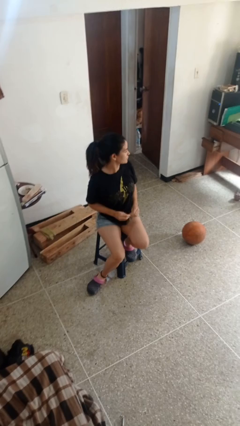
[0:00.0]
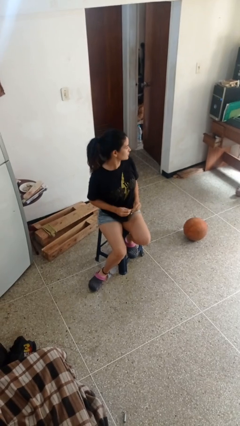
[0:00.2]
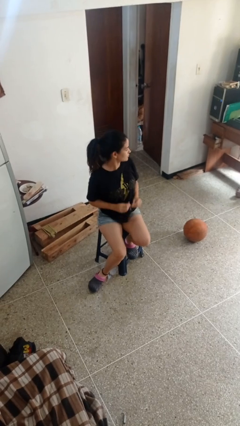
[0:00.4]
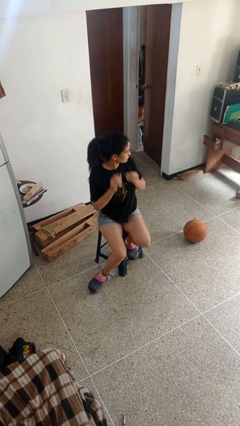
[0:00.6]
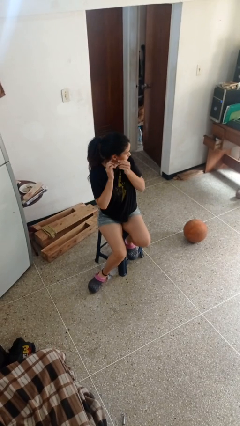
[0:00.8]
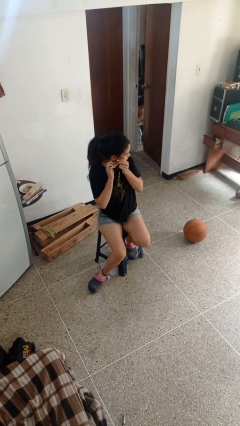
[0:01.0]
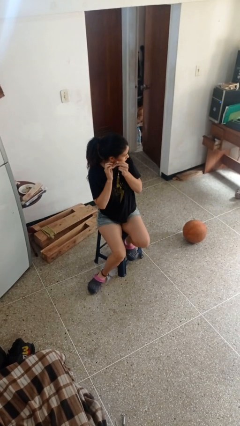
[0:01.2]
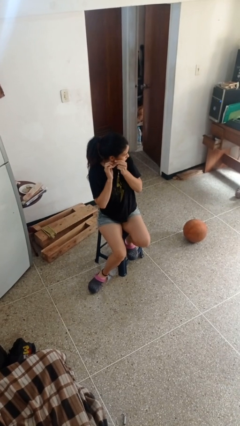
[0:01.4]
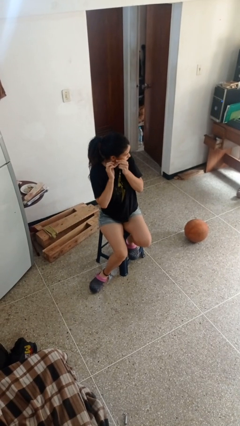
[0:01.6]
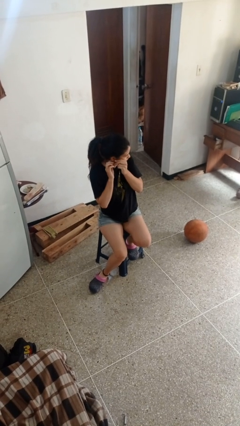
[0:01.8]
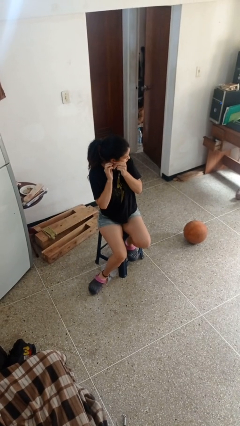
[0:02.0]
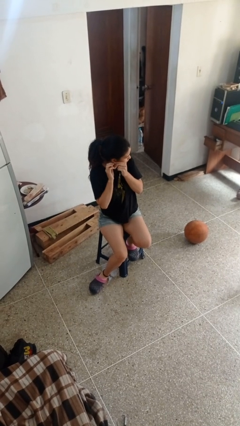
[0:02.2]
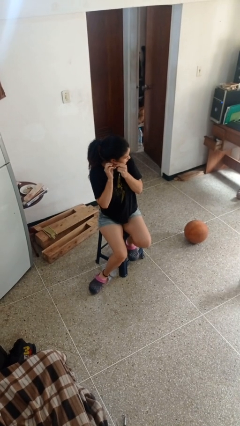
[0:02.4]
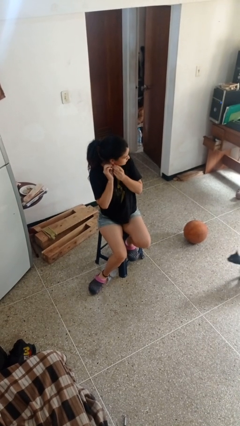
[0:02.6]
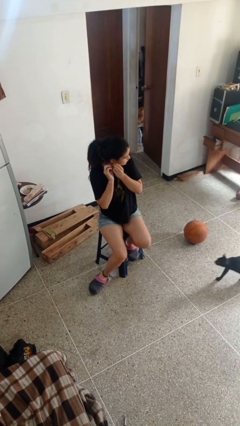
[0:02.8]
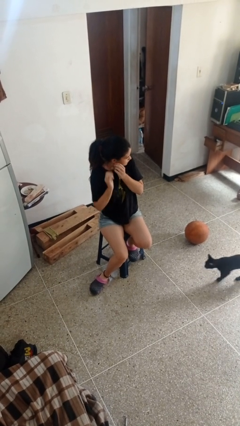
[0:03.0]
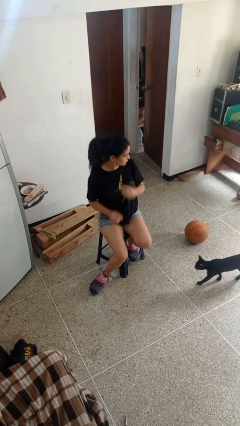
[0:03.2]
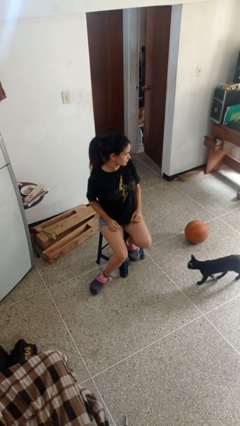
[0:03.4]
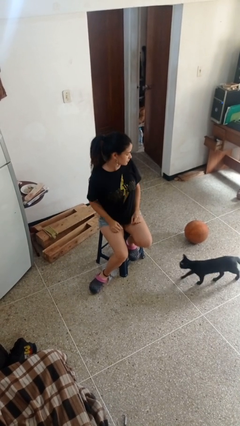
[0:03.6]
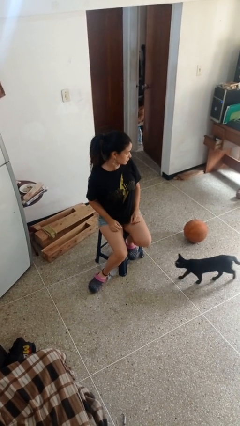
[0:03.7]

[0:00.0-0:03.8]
person puts on earrings

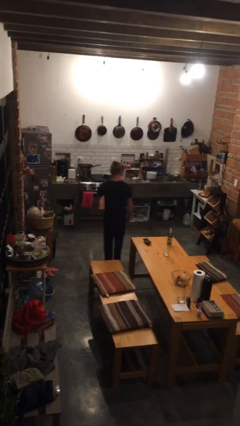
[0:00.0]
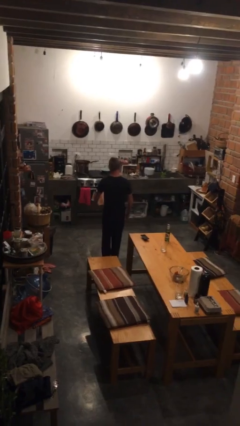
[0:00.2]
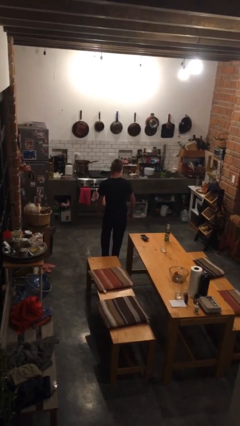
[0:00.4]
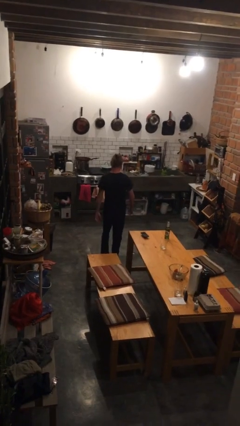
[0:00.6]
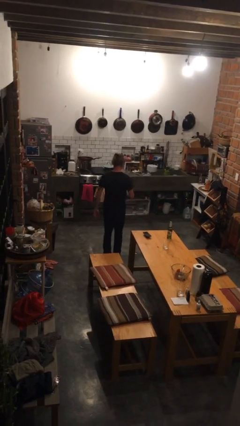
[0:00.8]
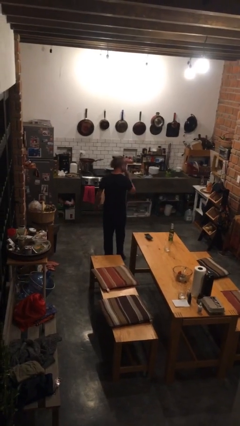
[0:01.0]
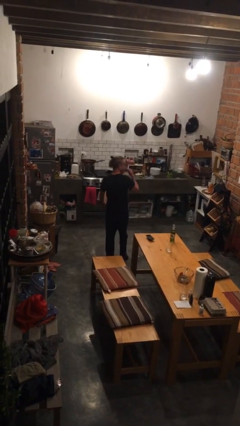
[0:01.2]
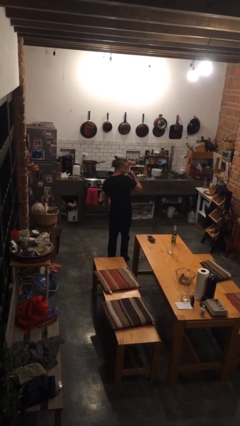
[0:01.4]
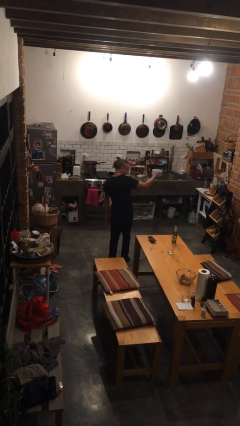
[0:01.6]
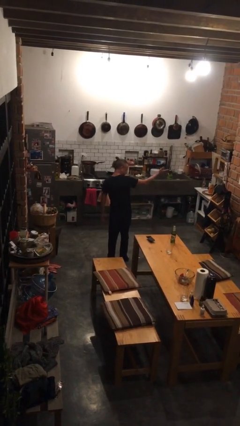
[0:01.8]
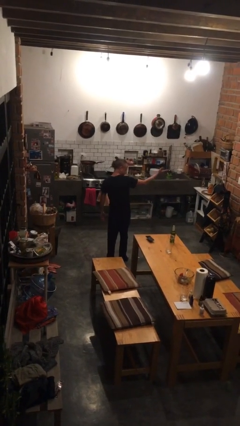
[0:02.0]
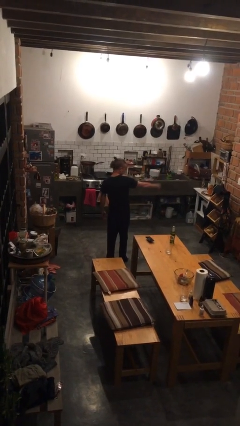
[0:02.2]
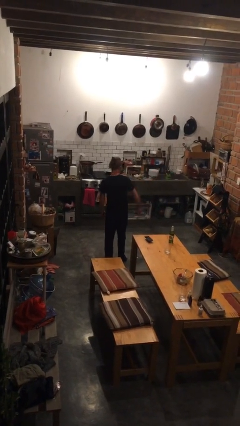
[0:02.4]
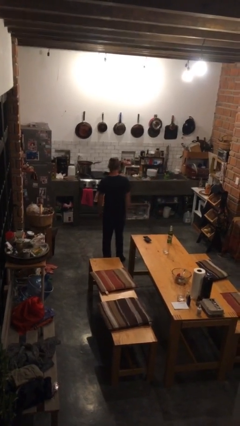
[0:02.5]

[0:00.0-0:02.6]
person gestures blow kiss

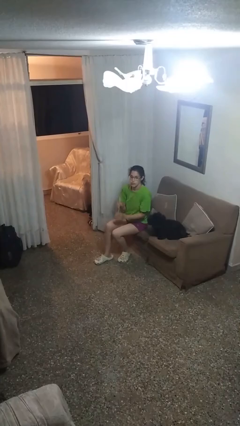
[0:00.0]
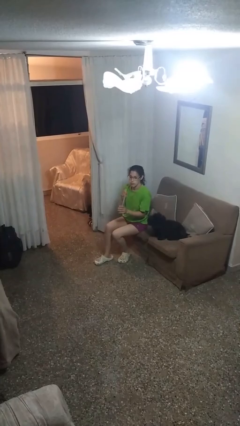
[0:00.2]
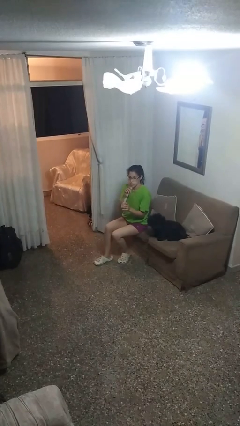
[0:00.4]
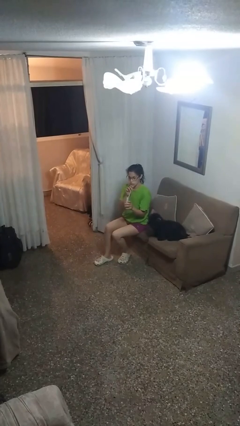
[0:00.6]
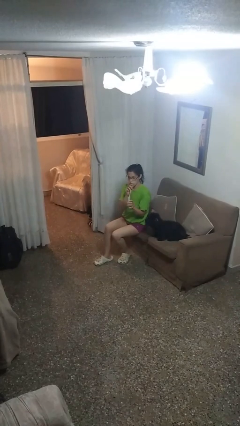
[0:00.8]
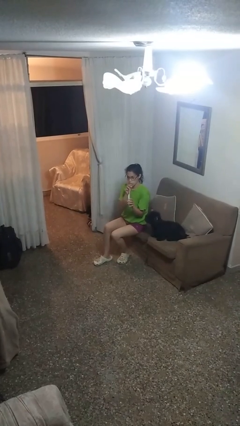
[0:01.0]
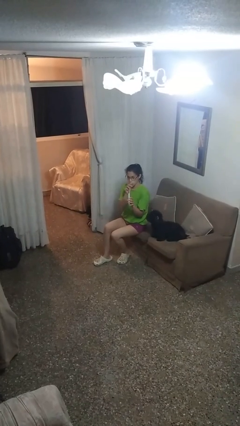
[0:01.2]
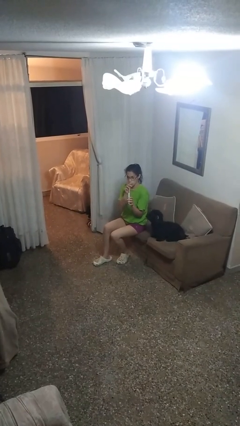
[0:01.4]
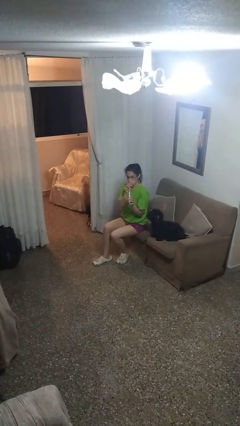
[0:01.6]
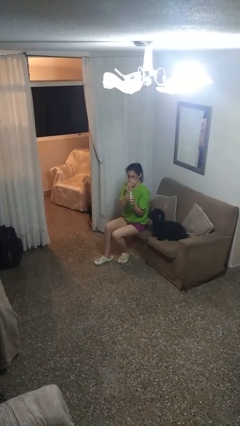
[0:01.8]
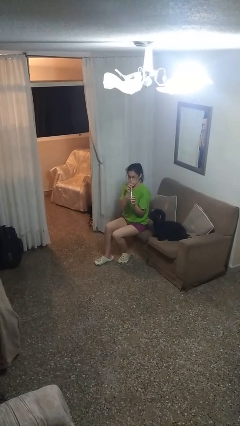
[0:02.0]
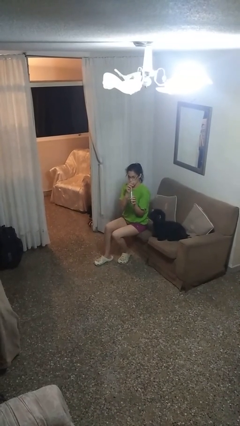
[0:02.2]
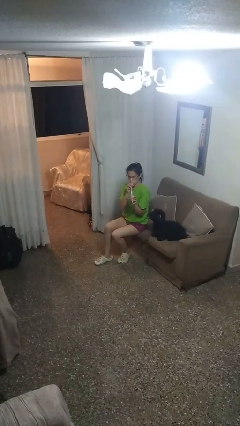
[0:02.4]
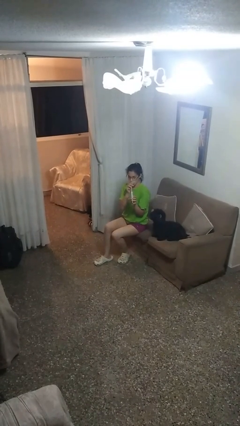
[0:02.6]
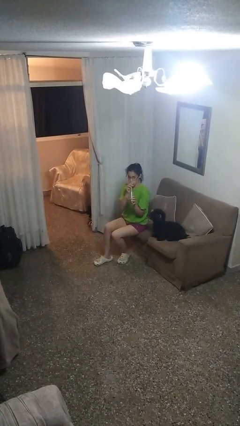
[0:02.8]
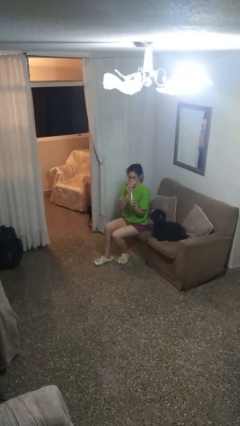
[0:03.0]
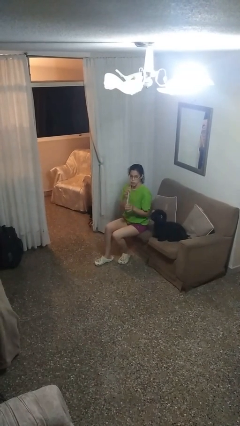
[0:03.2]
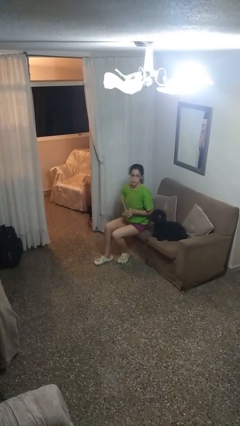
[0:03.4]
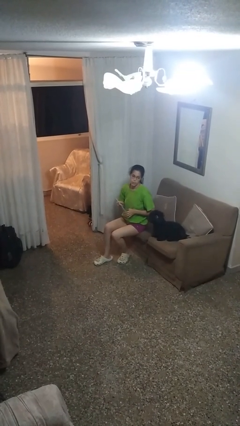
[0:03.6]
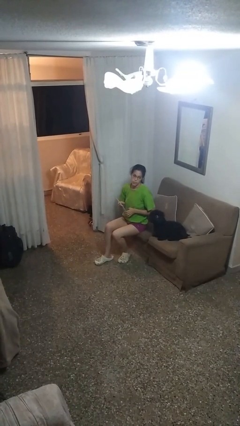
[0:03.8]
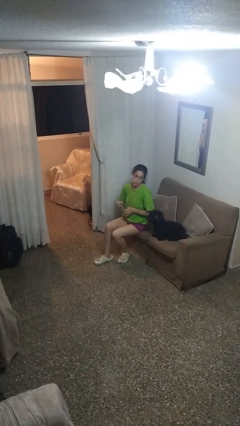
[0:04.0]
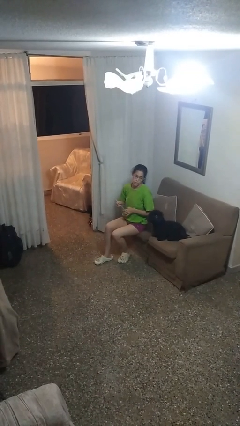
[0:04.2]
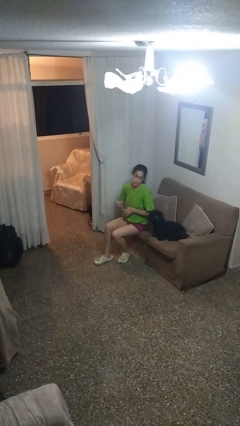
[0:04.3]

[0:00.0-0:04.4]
person drinks from straw

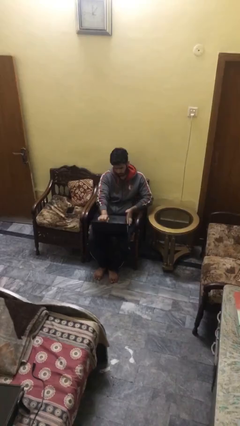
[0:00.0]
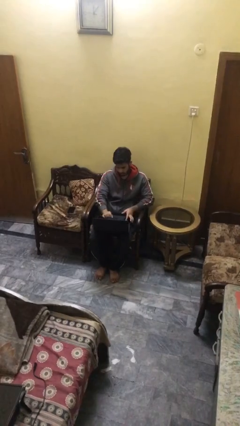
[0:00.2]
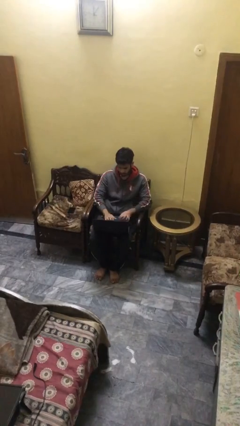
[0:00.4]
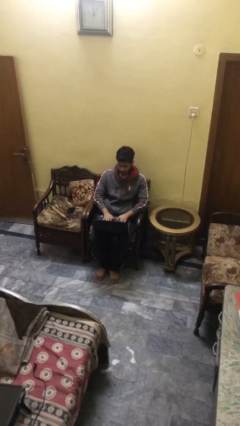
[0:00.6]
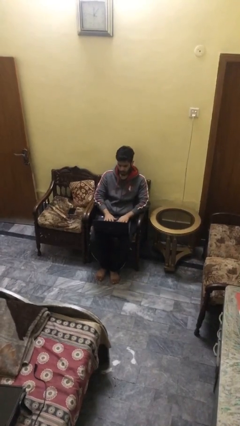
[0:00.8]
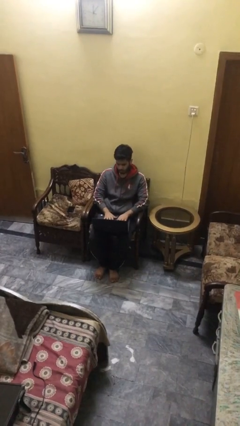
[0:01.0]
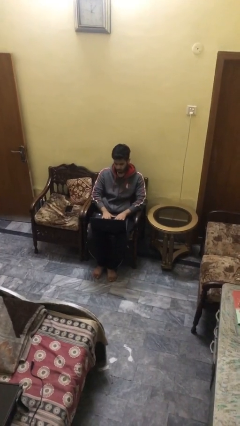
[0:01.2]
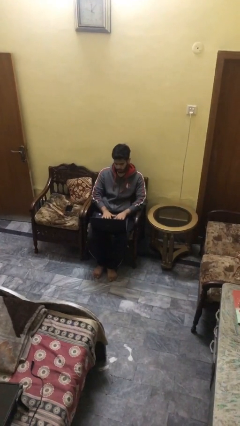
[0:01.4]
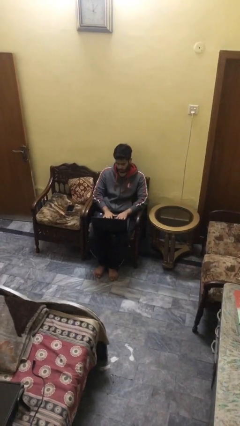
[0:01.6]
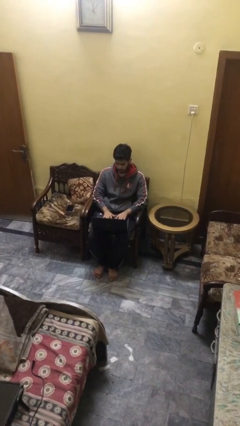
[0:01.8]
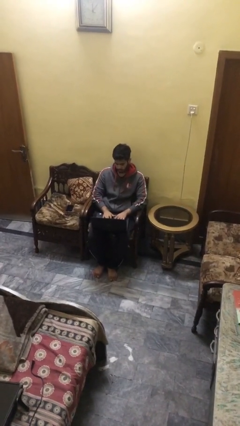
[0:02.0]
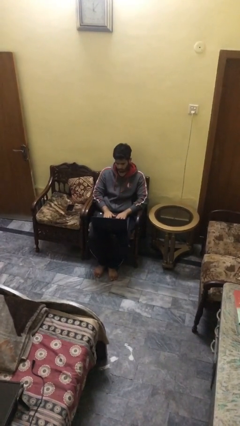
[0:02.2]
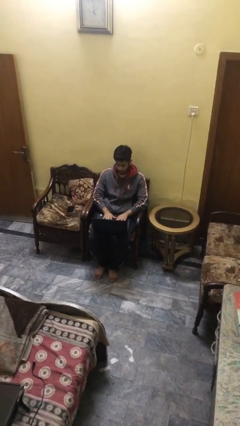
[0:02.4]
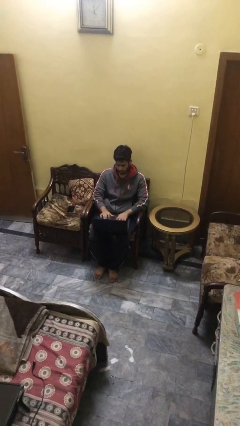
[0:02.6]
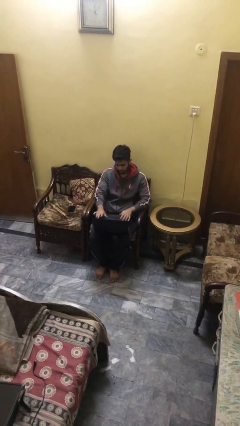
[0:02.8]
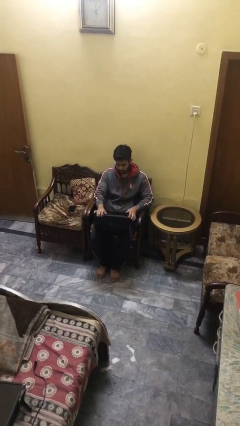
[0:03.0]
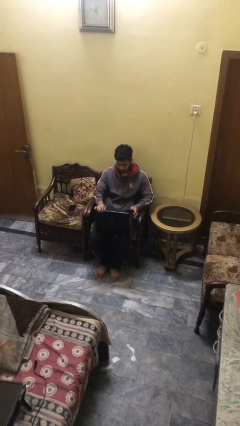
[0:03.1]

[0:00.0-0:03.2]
person interacts with laptop

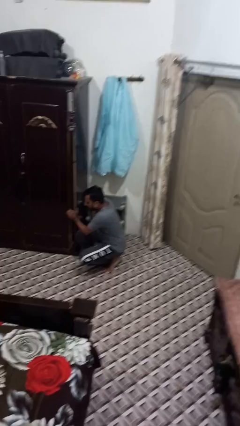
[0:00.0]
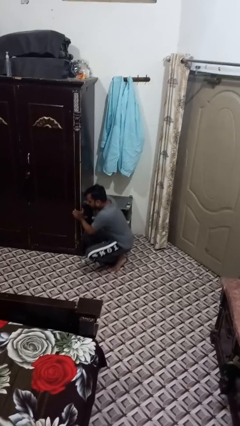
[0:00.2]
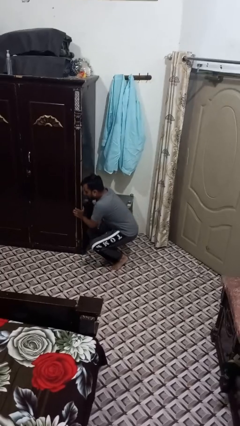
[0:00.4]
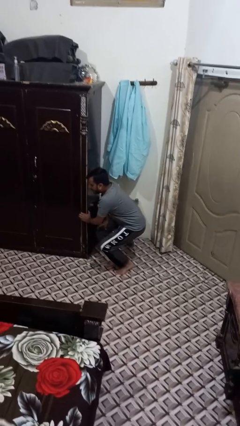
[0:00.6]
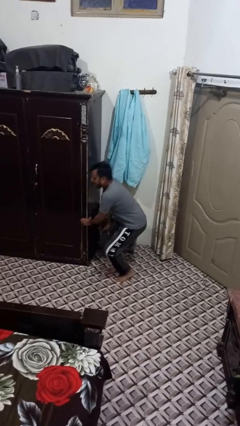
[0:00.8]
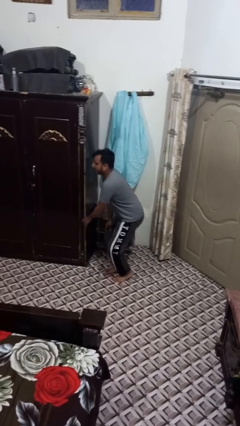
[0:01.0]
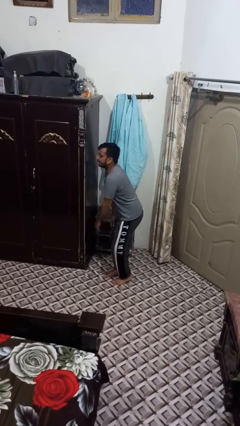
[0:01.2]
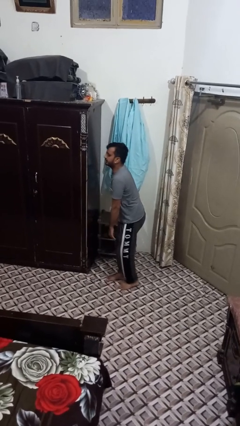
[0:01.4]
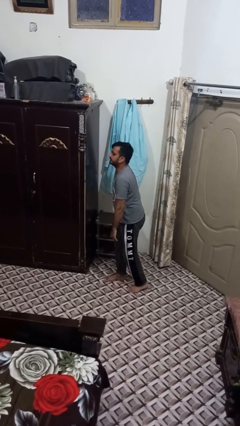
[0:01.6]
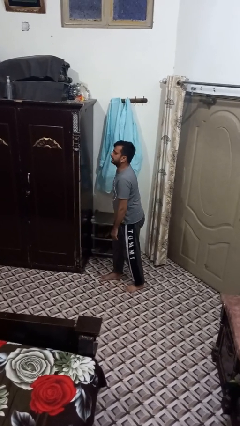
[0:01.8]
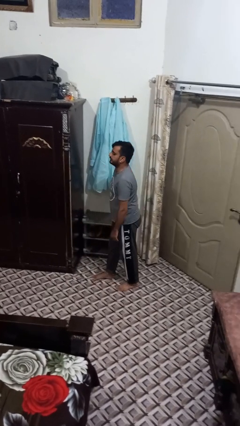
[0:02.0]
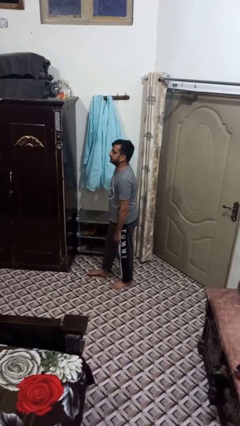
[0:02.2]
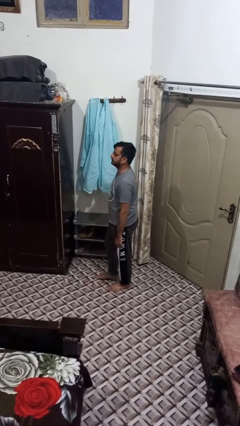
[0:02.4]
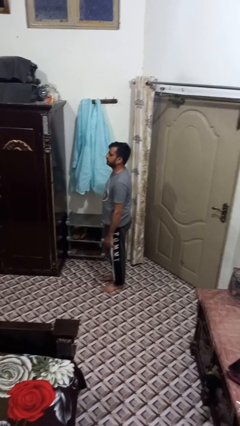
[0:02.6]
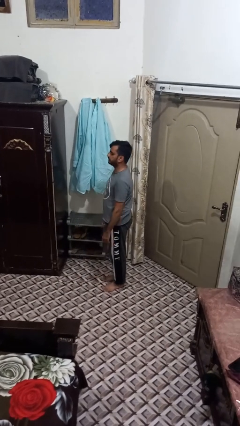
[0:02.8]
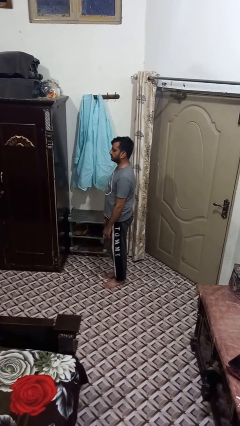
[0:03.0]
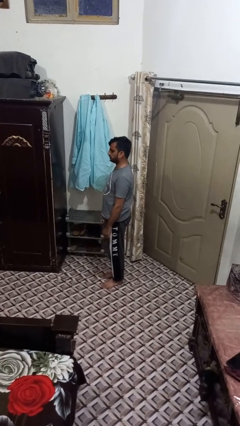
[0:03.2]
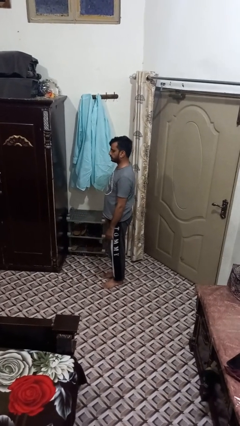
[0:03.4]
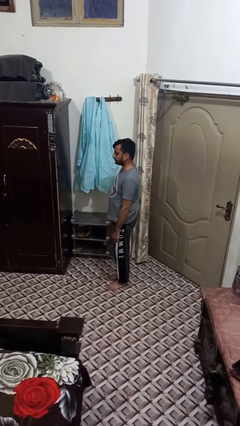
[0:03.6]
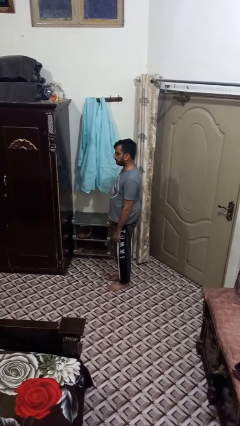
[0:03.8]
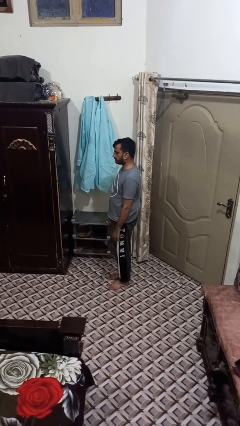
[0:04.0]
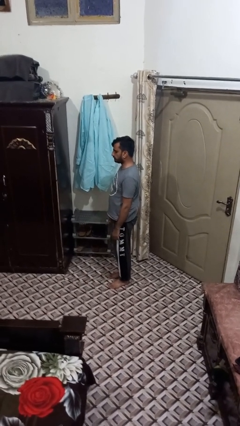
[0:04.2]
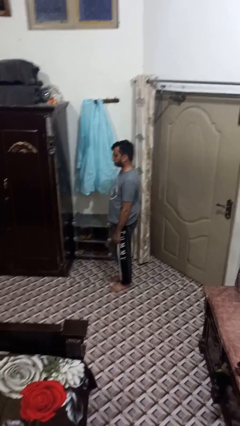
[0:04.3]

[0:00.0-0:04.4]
person stands up from floor
